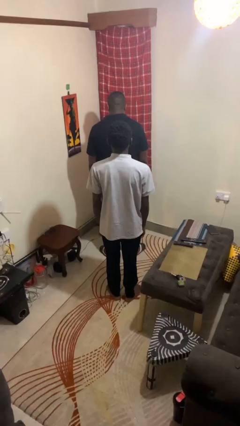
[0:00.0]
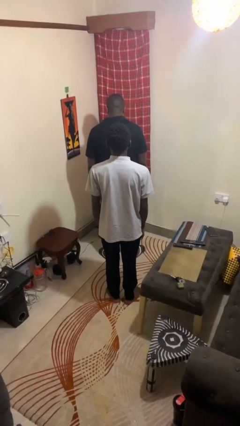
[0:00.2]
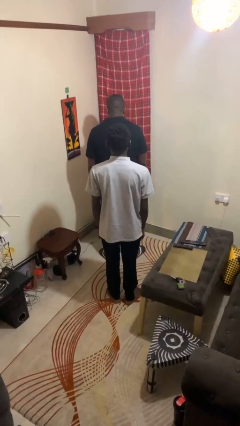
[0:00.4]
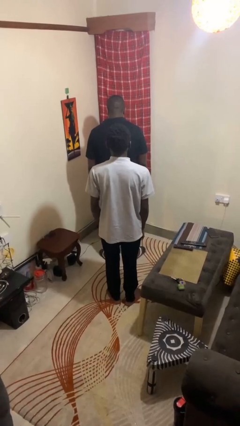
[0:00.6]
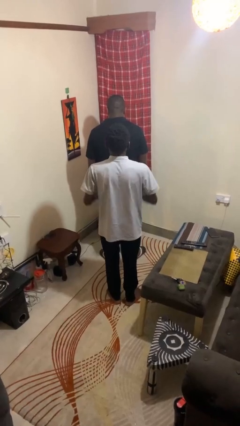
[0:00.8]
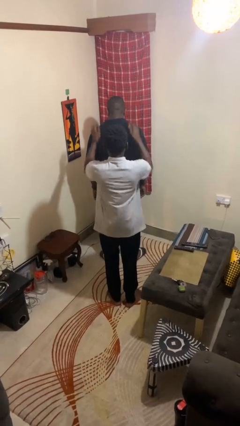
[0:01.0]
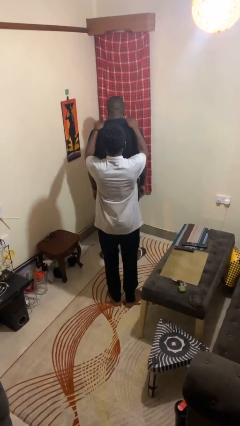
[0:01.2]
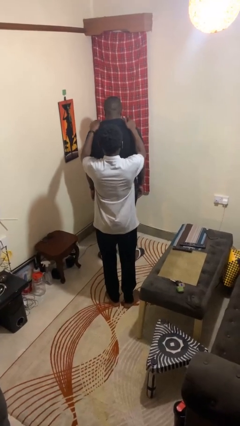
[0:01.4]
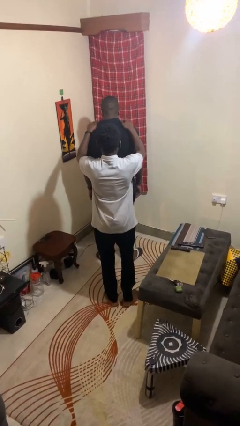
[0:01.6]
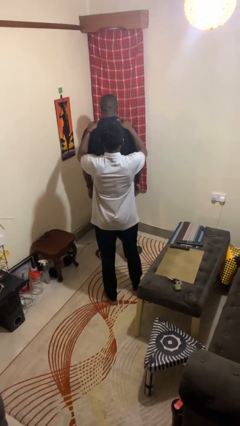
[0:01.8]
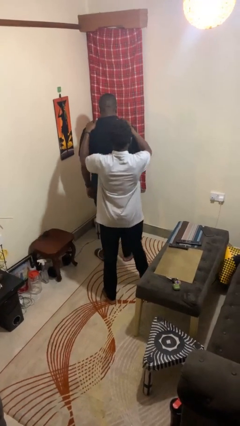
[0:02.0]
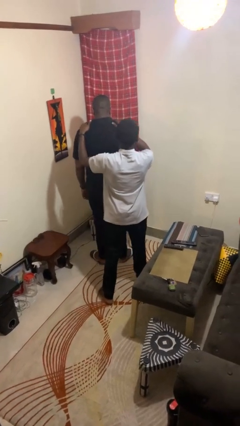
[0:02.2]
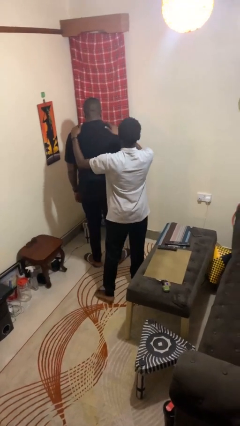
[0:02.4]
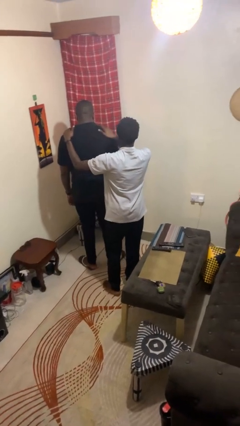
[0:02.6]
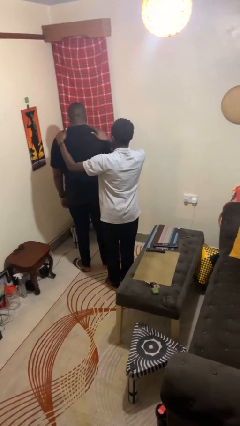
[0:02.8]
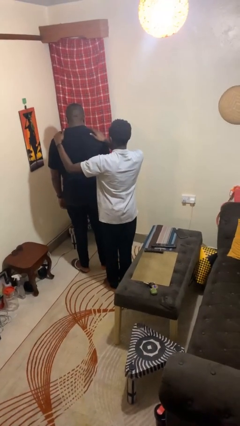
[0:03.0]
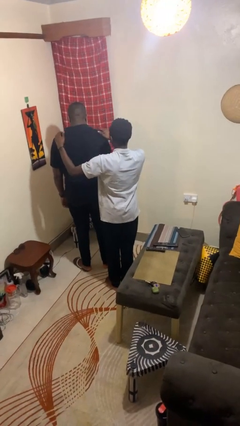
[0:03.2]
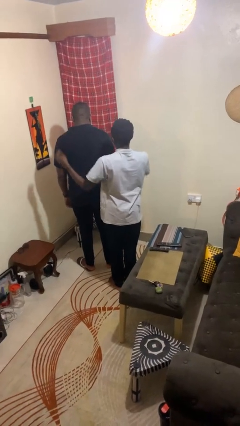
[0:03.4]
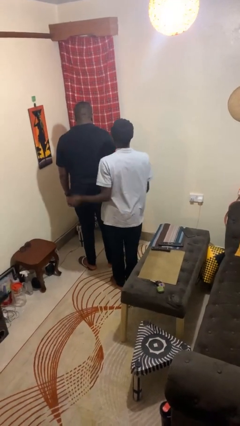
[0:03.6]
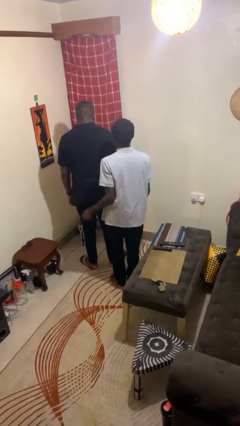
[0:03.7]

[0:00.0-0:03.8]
person pounds shoulders of person

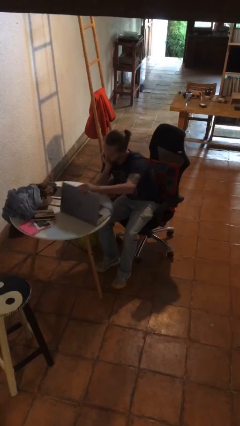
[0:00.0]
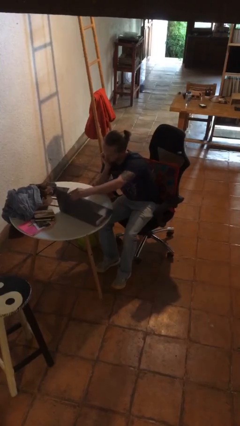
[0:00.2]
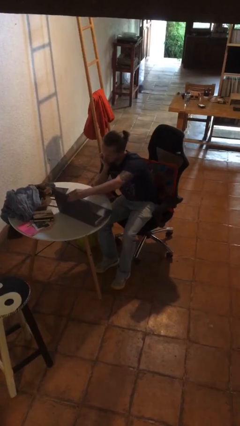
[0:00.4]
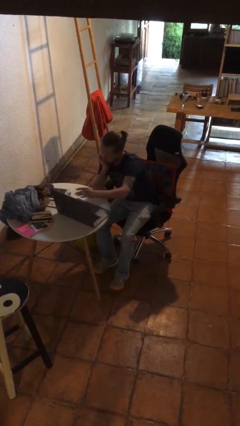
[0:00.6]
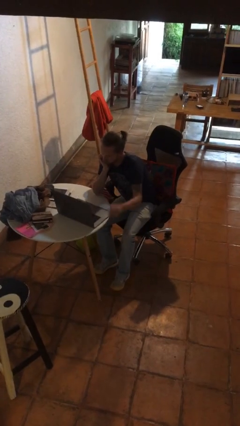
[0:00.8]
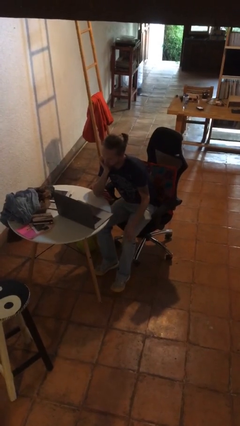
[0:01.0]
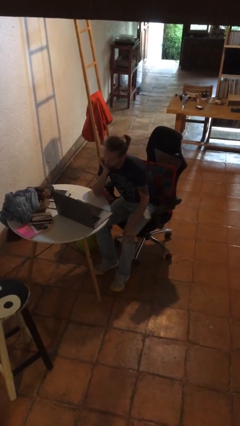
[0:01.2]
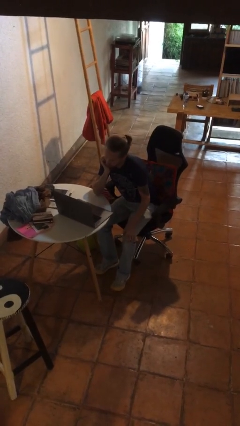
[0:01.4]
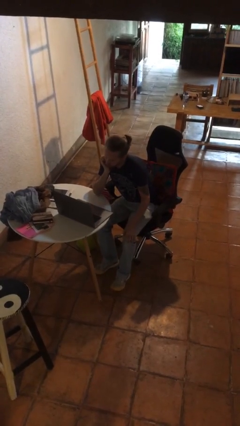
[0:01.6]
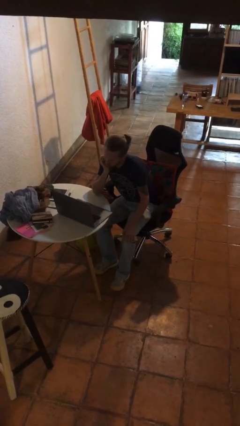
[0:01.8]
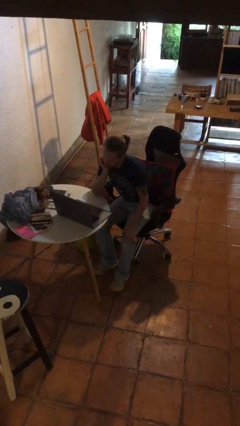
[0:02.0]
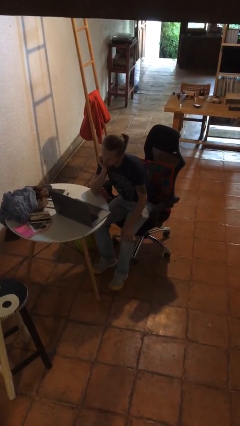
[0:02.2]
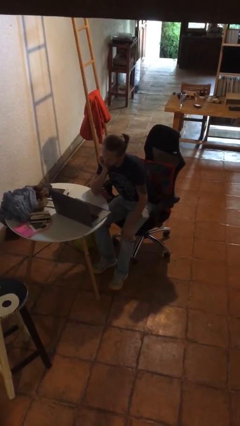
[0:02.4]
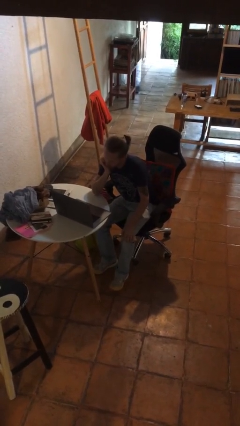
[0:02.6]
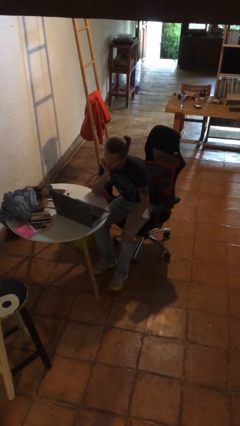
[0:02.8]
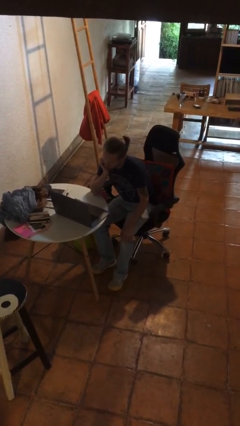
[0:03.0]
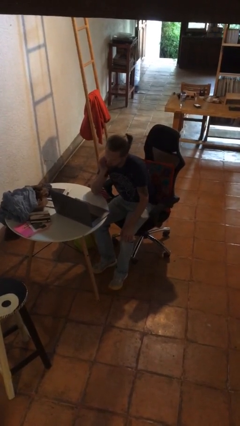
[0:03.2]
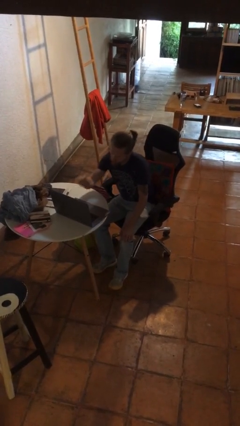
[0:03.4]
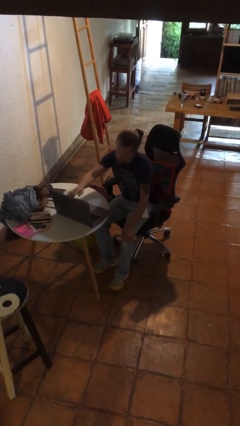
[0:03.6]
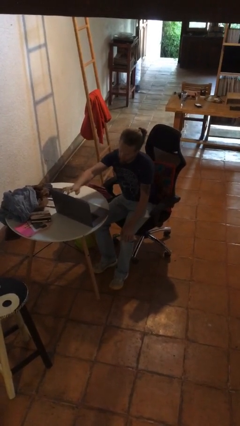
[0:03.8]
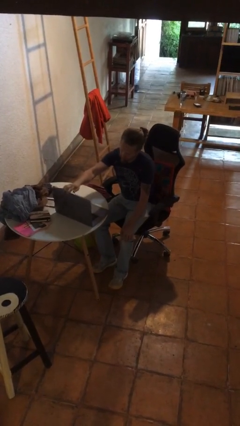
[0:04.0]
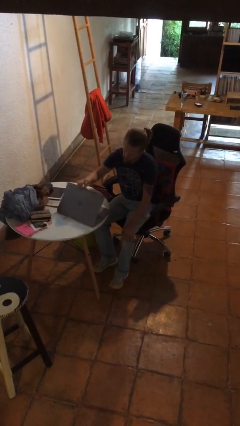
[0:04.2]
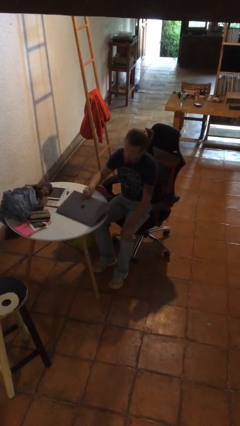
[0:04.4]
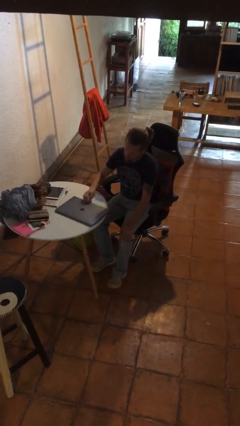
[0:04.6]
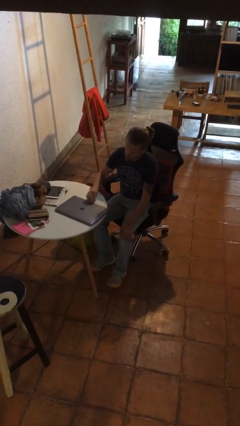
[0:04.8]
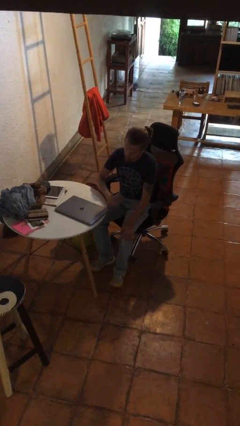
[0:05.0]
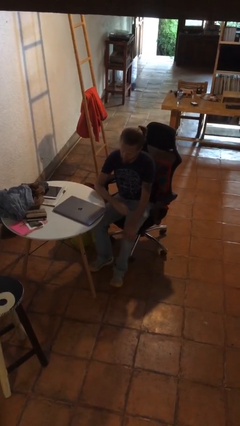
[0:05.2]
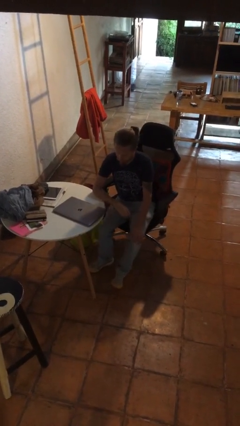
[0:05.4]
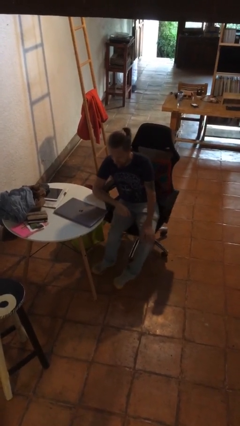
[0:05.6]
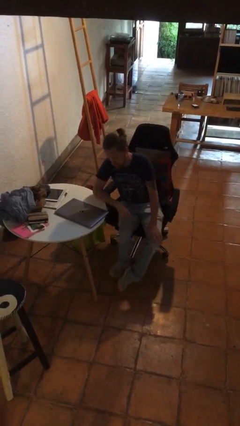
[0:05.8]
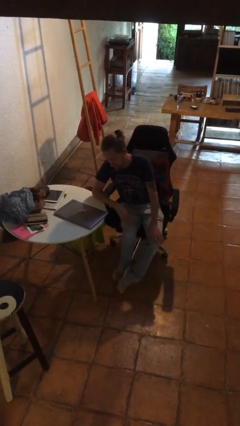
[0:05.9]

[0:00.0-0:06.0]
person closes laptop

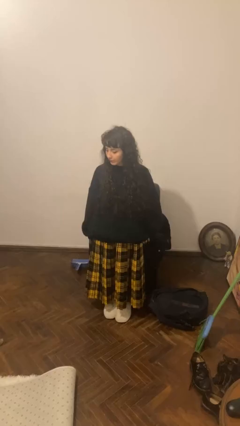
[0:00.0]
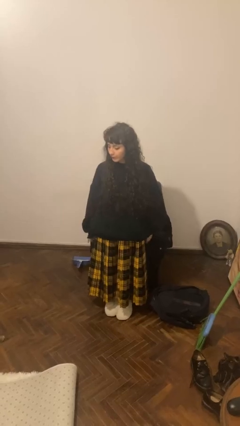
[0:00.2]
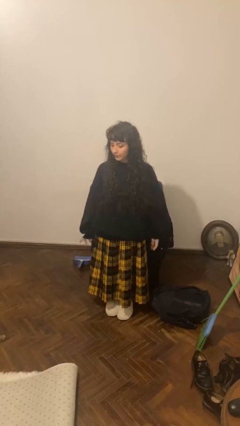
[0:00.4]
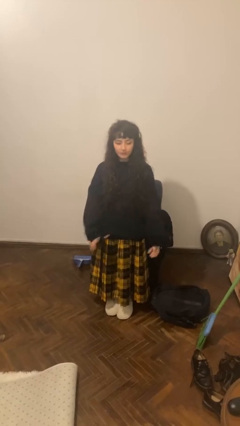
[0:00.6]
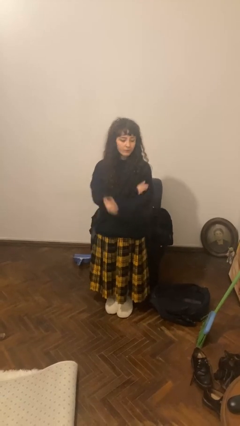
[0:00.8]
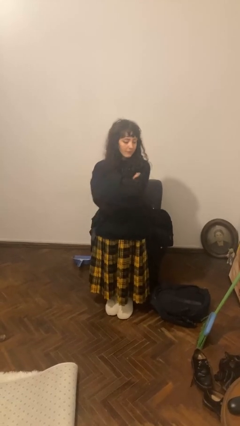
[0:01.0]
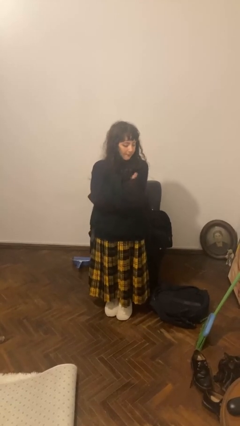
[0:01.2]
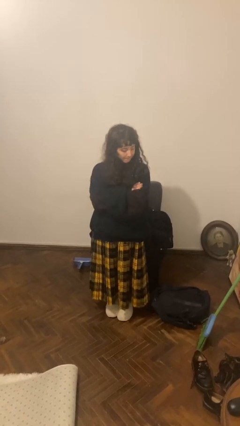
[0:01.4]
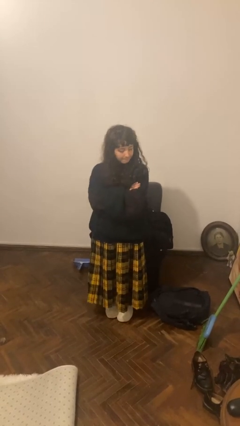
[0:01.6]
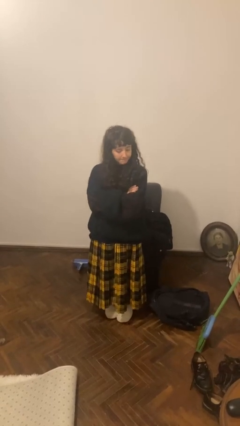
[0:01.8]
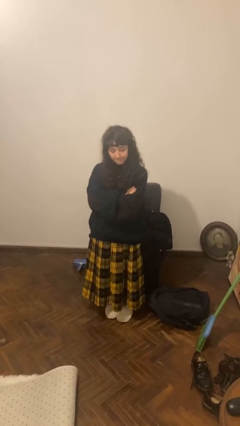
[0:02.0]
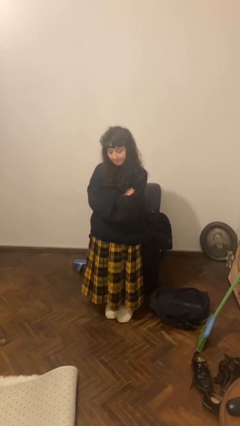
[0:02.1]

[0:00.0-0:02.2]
person crosses arms

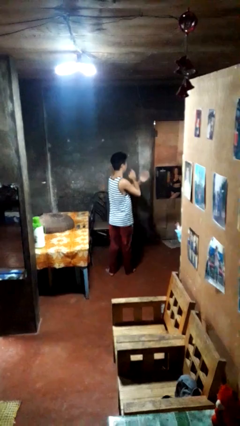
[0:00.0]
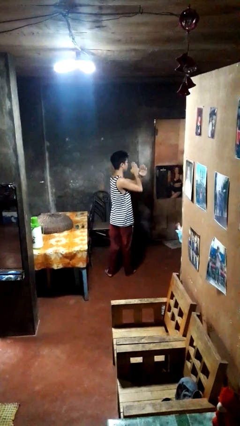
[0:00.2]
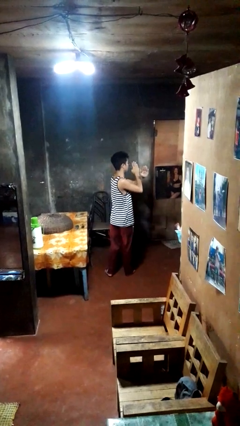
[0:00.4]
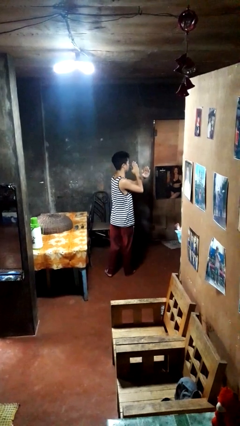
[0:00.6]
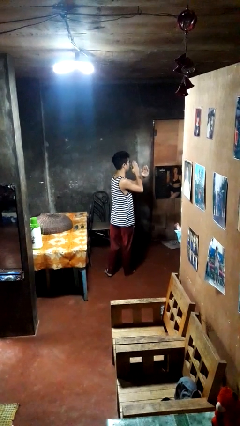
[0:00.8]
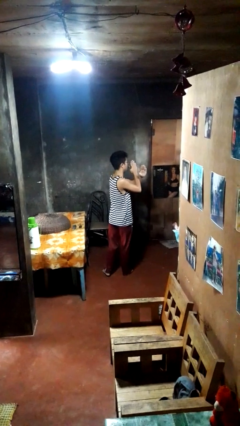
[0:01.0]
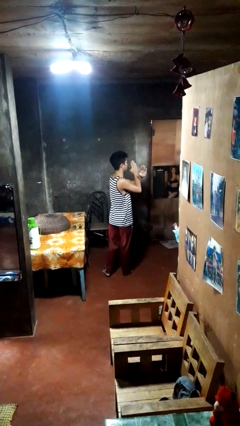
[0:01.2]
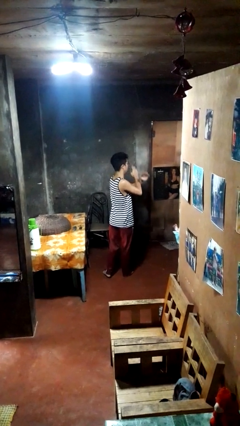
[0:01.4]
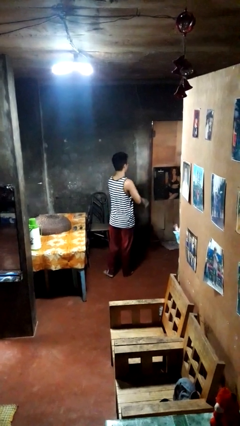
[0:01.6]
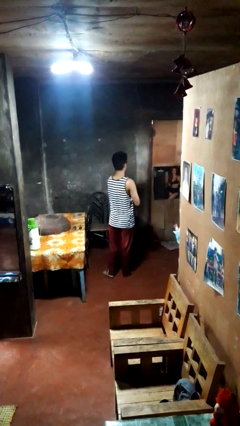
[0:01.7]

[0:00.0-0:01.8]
person gestures arms x

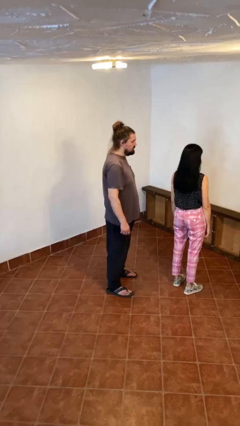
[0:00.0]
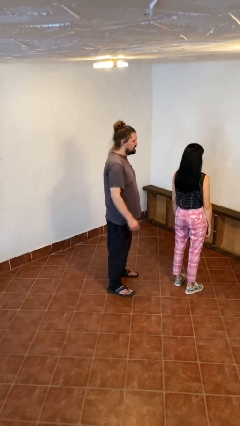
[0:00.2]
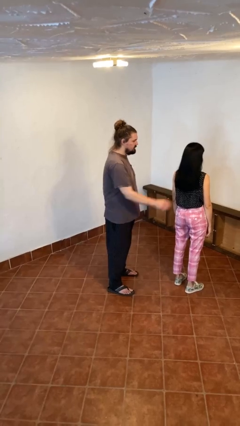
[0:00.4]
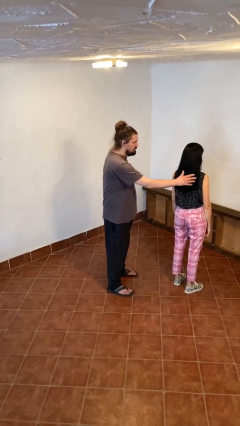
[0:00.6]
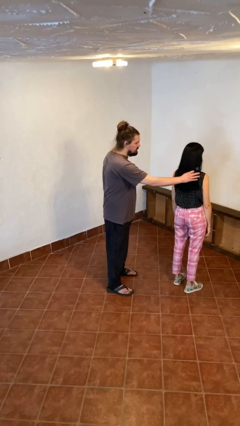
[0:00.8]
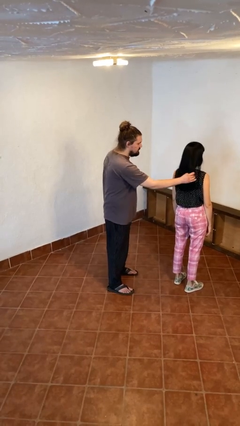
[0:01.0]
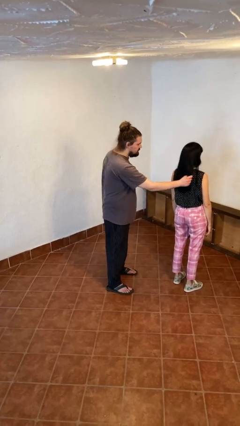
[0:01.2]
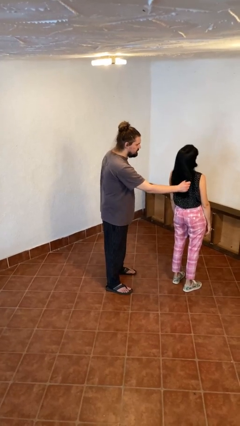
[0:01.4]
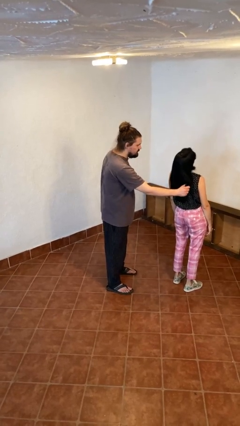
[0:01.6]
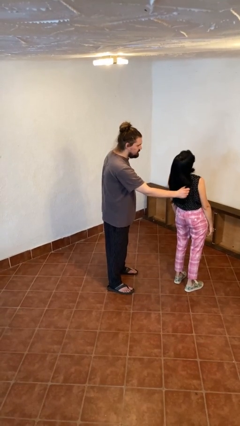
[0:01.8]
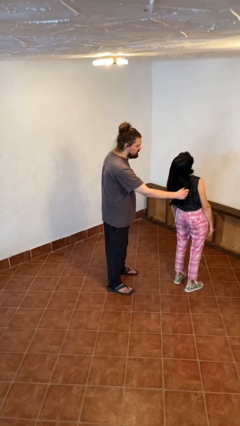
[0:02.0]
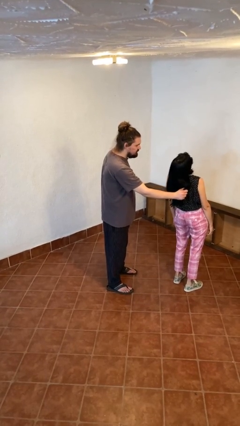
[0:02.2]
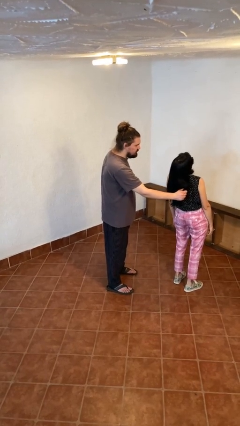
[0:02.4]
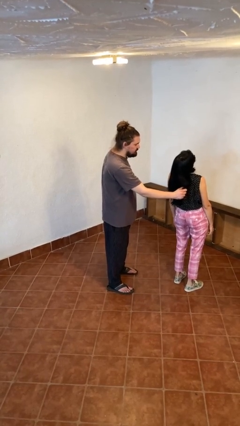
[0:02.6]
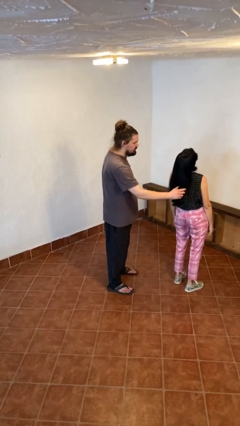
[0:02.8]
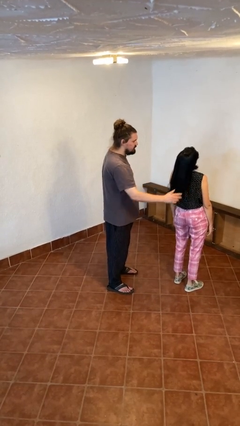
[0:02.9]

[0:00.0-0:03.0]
person grabs person by hair

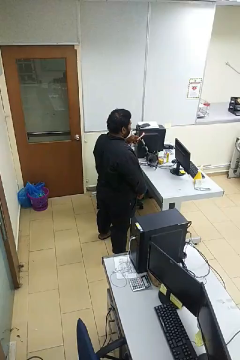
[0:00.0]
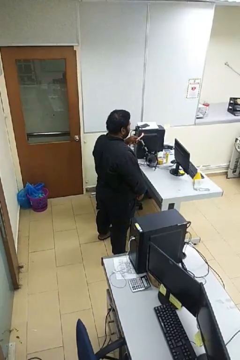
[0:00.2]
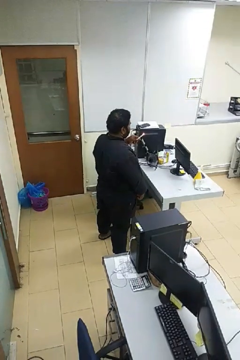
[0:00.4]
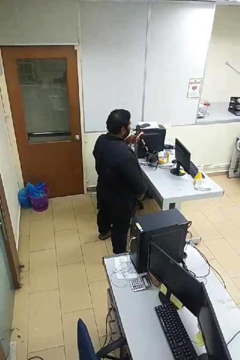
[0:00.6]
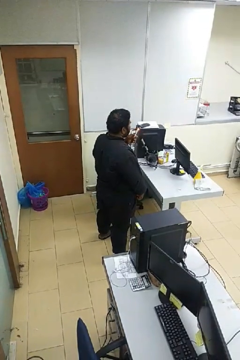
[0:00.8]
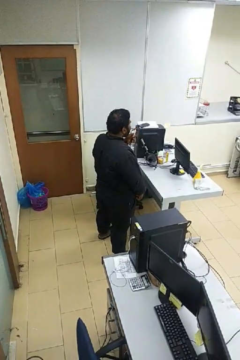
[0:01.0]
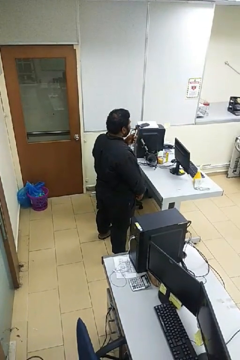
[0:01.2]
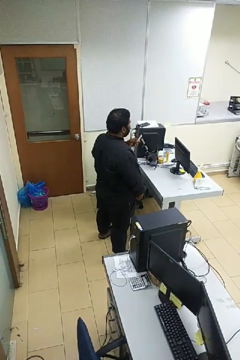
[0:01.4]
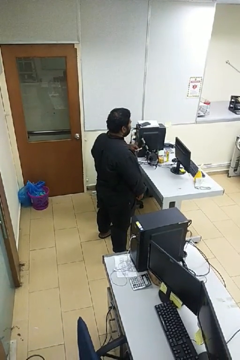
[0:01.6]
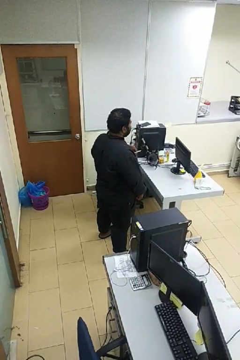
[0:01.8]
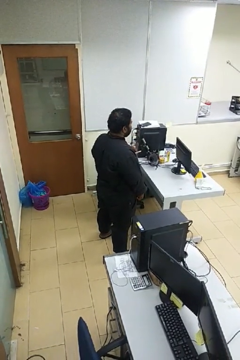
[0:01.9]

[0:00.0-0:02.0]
person extinguishes candle
